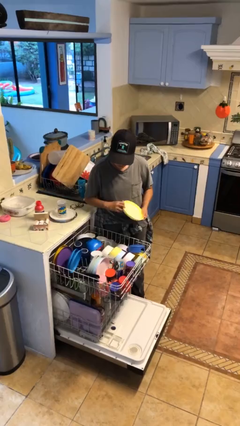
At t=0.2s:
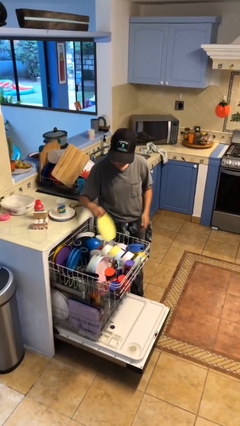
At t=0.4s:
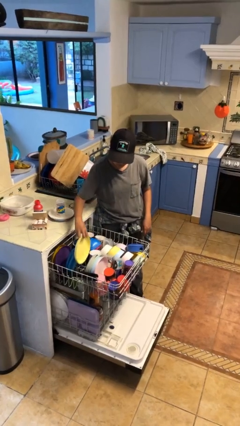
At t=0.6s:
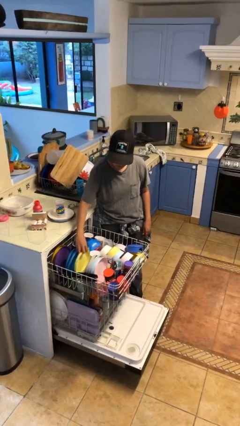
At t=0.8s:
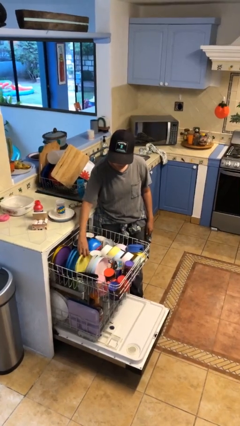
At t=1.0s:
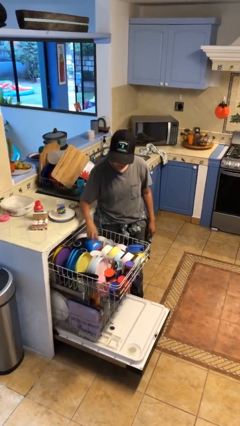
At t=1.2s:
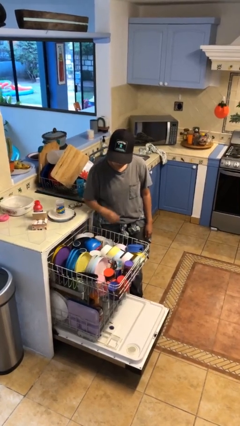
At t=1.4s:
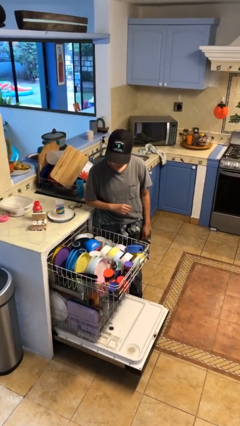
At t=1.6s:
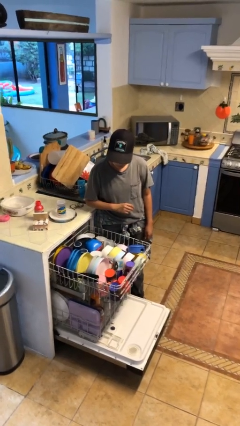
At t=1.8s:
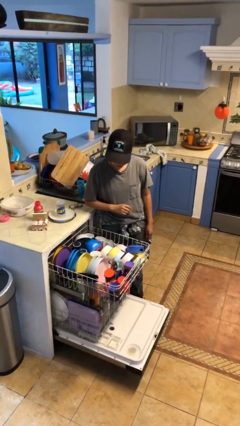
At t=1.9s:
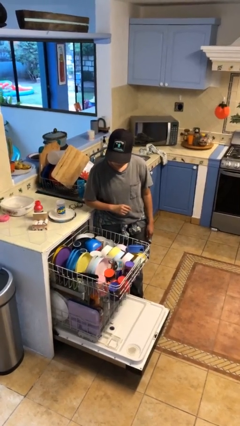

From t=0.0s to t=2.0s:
person loads dishwasher

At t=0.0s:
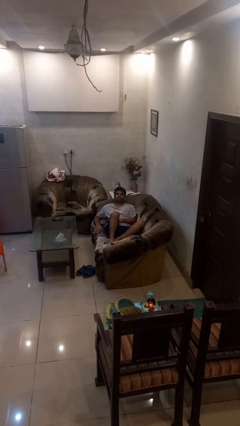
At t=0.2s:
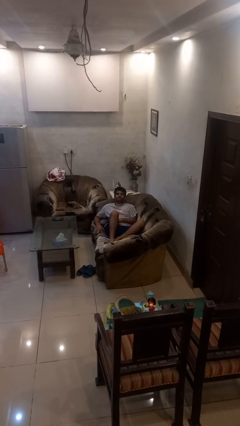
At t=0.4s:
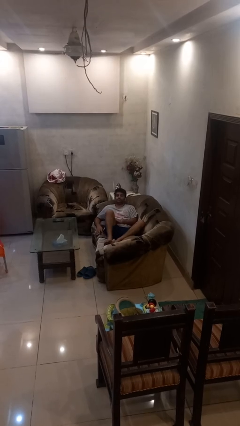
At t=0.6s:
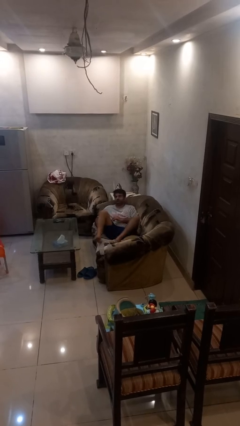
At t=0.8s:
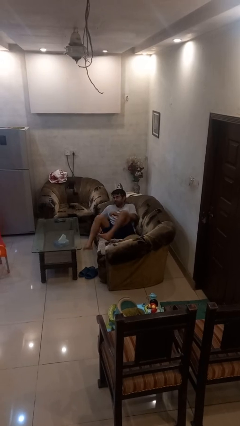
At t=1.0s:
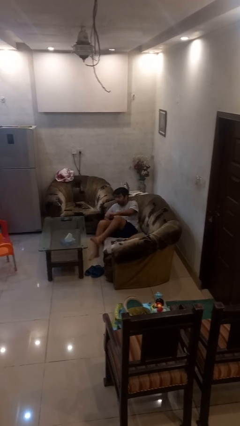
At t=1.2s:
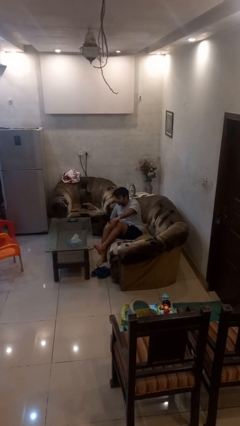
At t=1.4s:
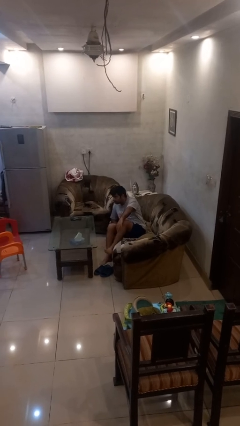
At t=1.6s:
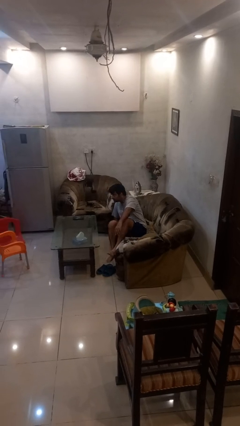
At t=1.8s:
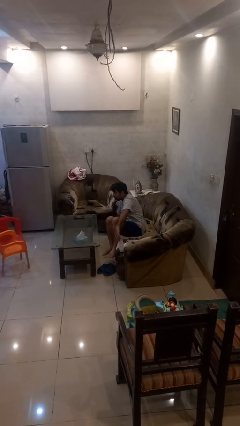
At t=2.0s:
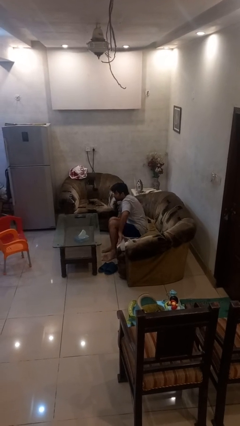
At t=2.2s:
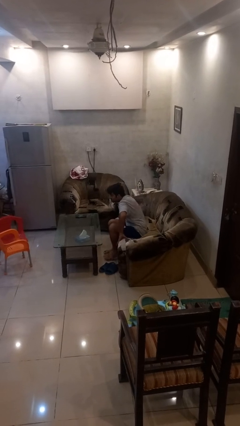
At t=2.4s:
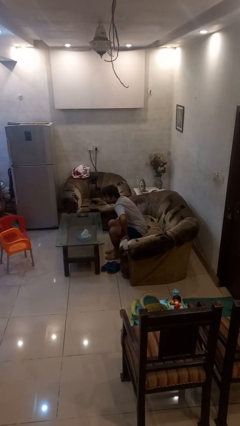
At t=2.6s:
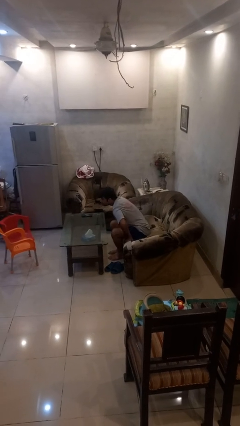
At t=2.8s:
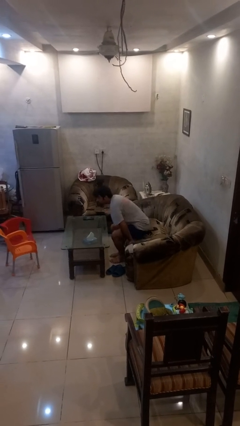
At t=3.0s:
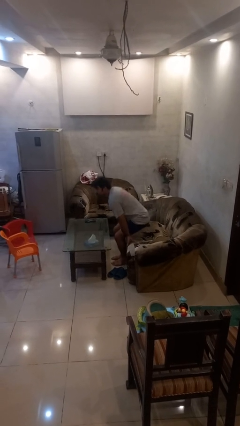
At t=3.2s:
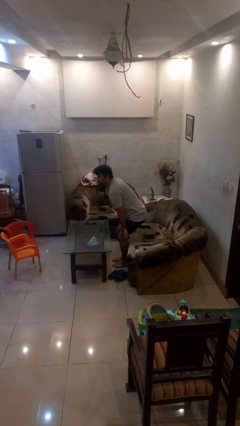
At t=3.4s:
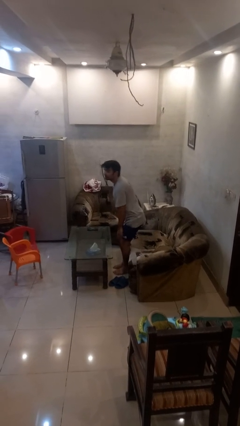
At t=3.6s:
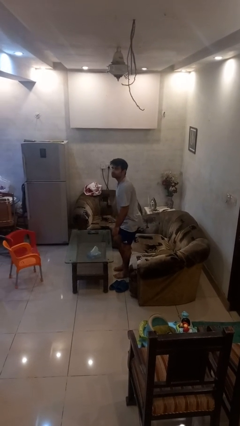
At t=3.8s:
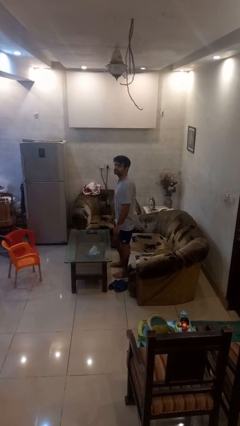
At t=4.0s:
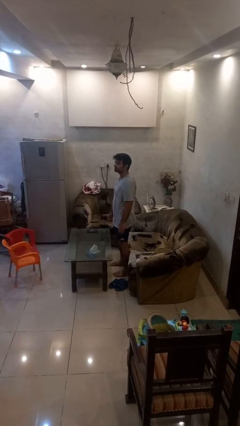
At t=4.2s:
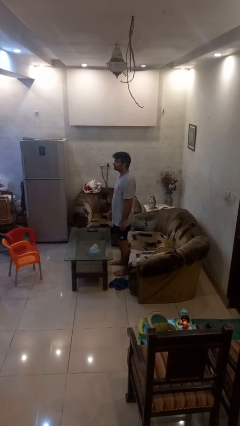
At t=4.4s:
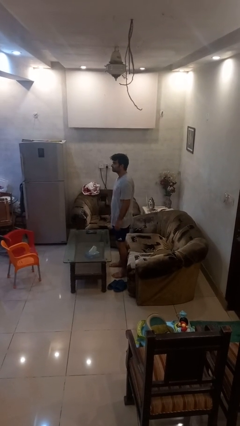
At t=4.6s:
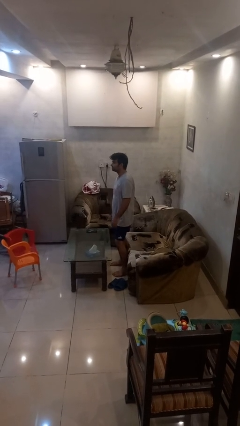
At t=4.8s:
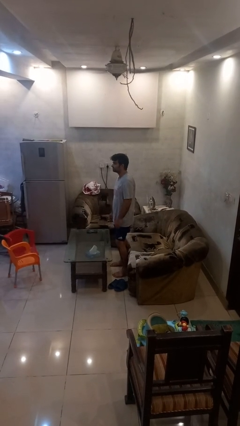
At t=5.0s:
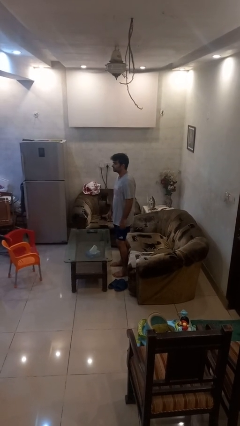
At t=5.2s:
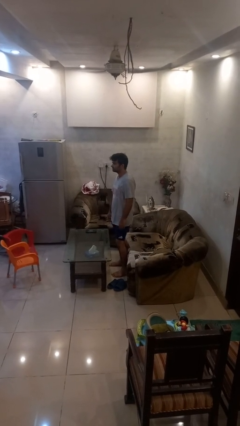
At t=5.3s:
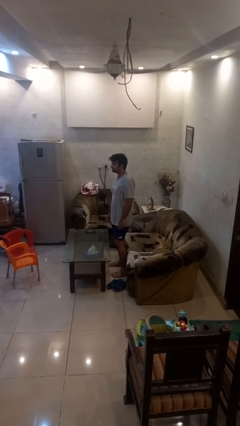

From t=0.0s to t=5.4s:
person stands up

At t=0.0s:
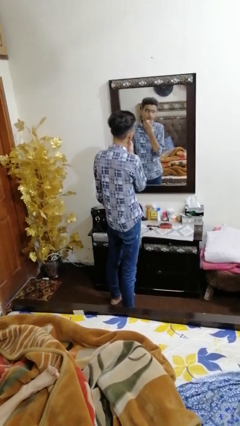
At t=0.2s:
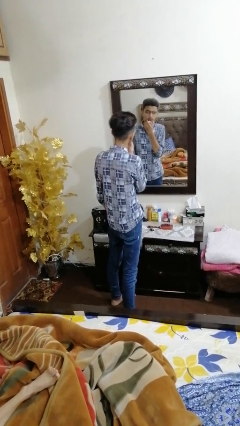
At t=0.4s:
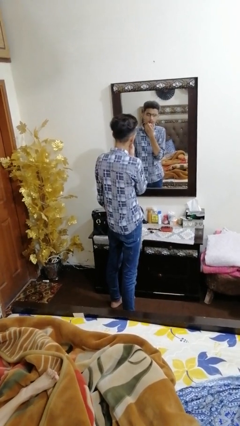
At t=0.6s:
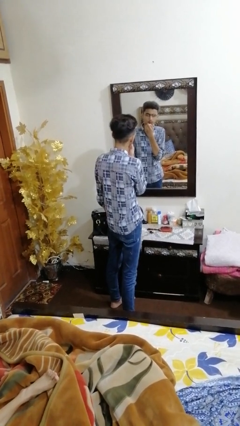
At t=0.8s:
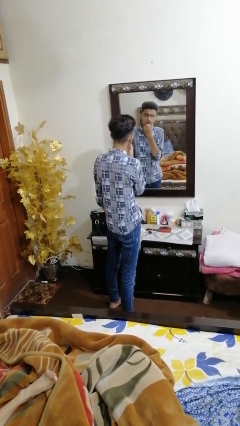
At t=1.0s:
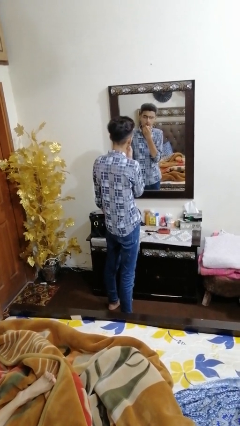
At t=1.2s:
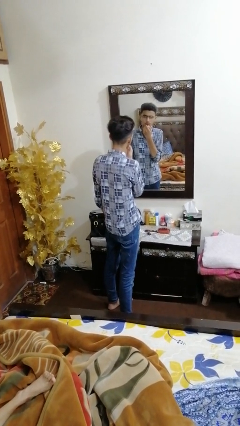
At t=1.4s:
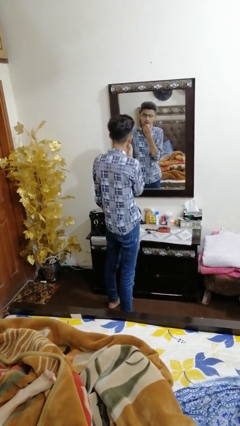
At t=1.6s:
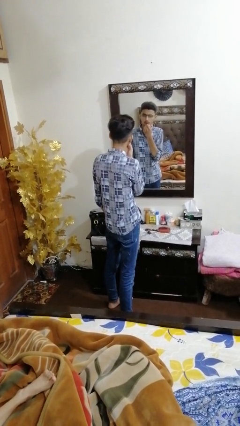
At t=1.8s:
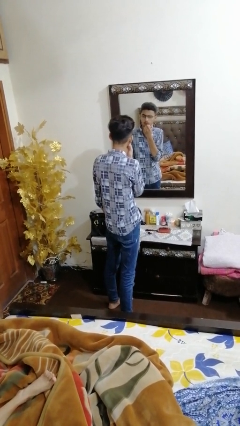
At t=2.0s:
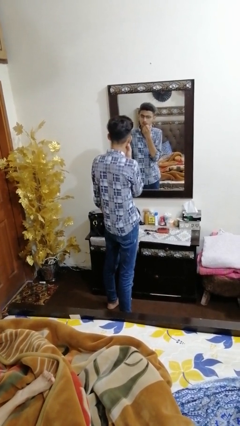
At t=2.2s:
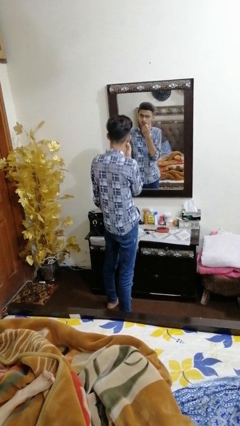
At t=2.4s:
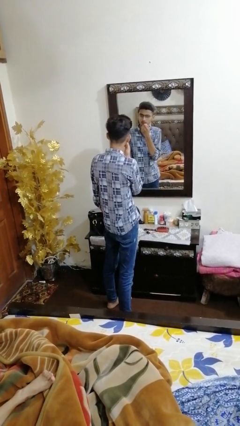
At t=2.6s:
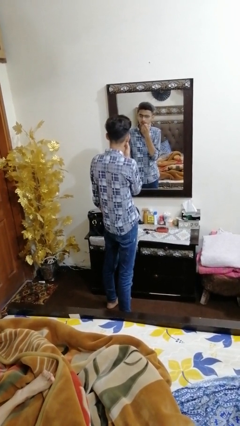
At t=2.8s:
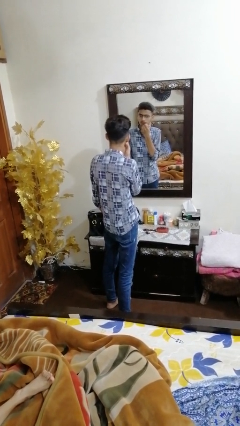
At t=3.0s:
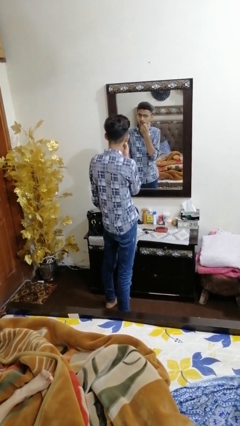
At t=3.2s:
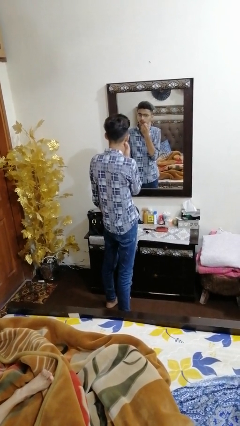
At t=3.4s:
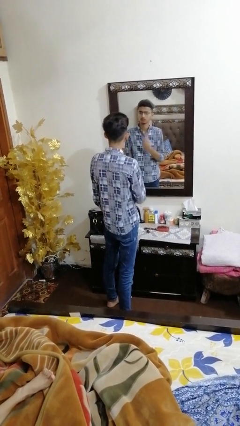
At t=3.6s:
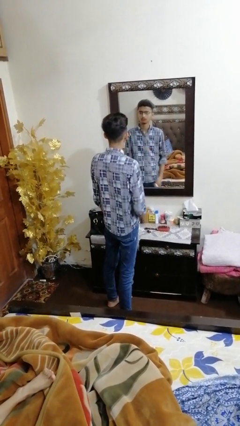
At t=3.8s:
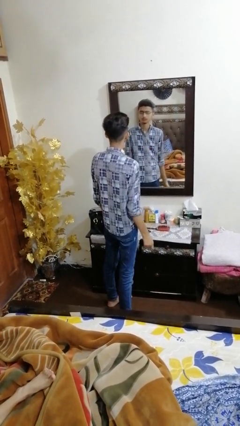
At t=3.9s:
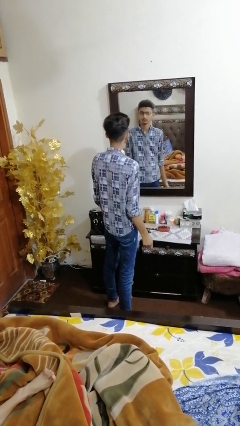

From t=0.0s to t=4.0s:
person applies lip makeup

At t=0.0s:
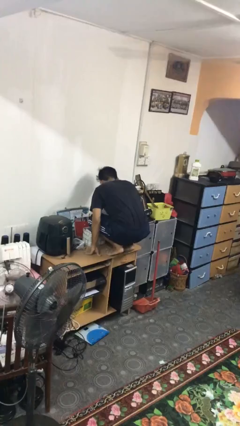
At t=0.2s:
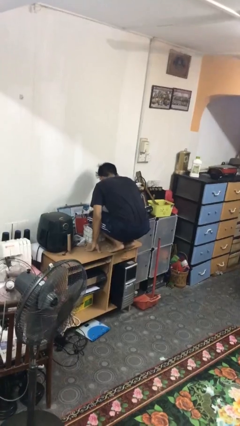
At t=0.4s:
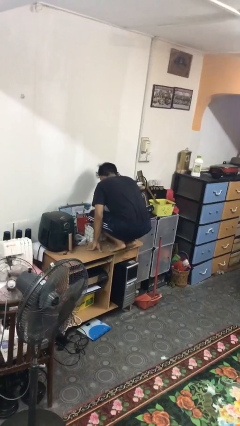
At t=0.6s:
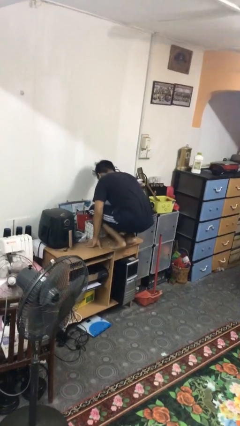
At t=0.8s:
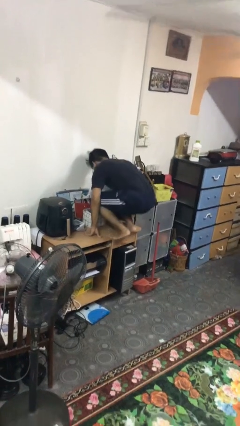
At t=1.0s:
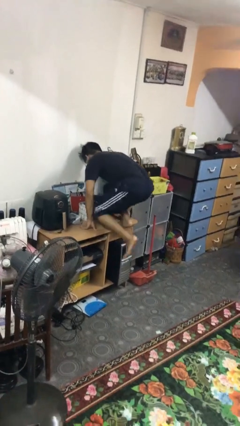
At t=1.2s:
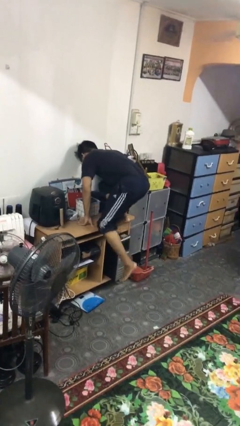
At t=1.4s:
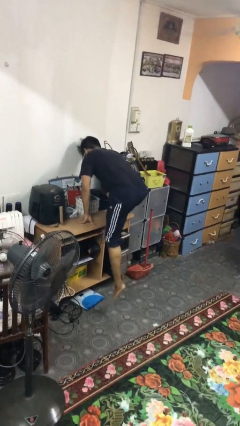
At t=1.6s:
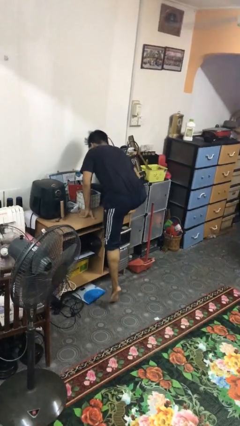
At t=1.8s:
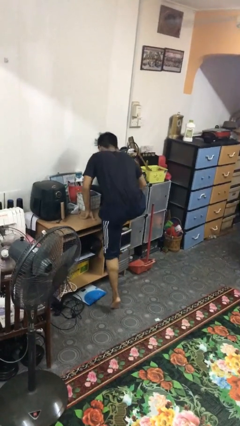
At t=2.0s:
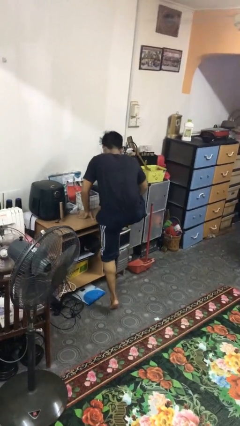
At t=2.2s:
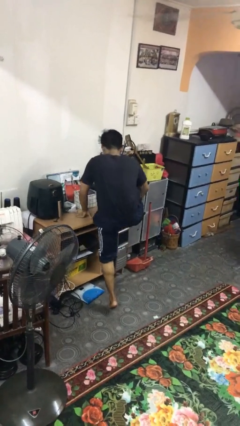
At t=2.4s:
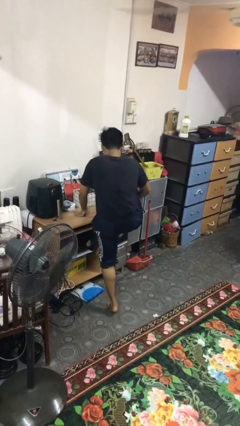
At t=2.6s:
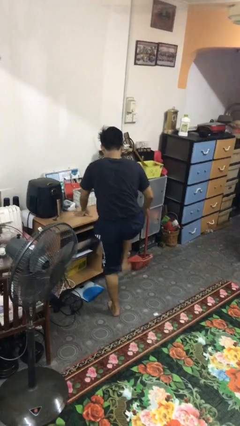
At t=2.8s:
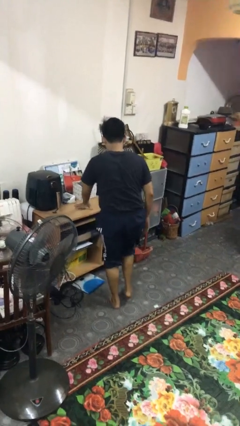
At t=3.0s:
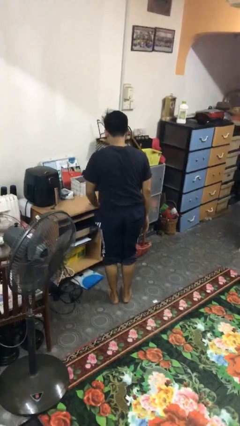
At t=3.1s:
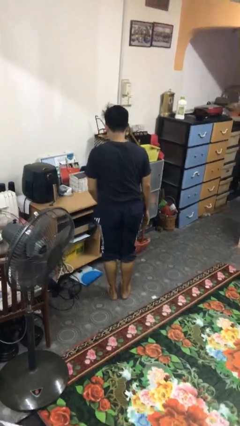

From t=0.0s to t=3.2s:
person climbs off table

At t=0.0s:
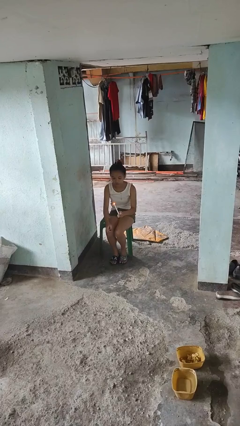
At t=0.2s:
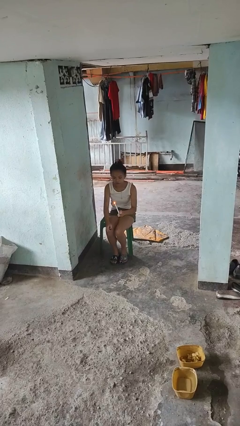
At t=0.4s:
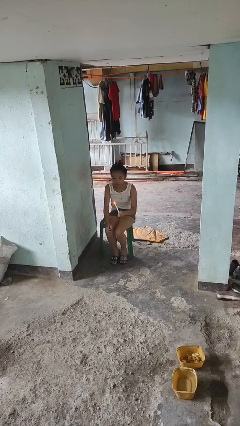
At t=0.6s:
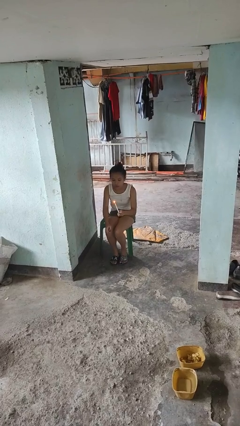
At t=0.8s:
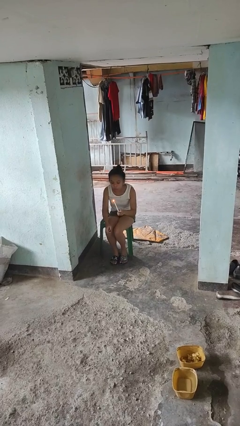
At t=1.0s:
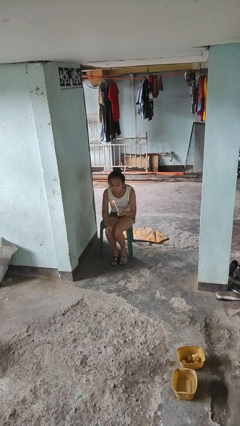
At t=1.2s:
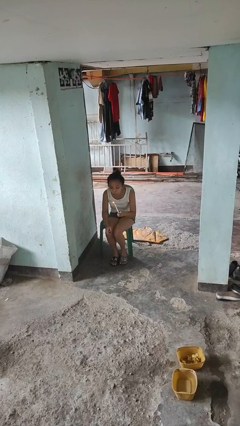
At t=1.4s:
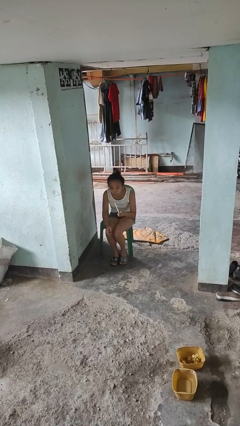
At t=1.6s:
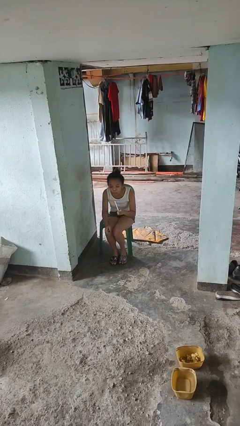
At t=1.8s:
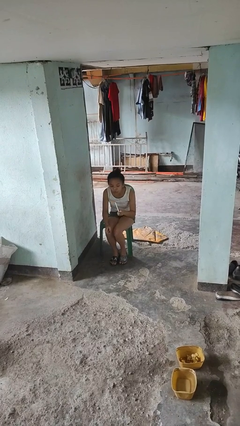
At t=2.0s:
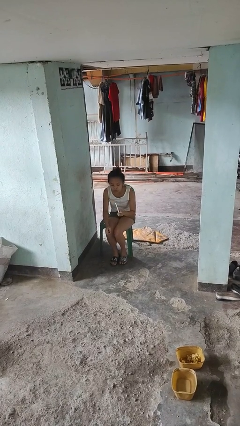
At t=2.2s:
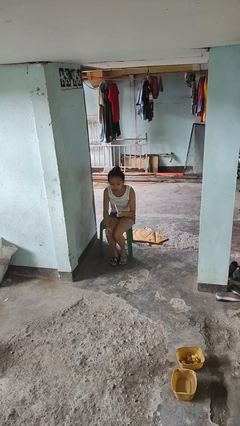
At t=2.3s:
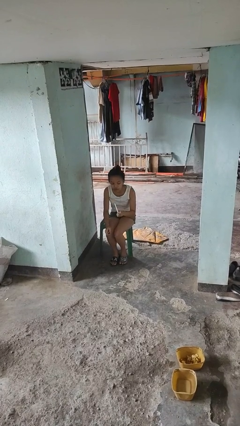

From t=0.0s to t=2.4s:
person extinguishes candle

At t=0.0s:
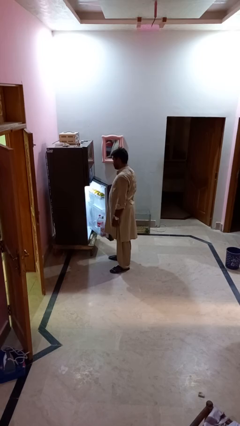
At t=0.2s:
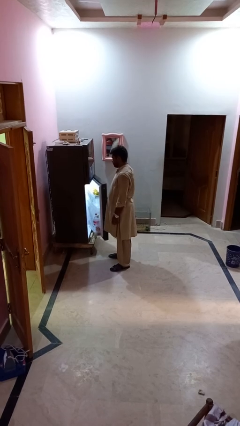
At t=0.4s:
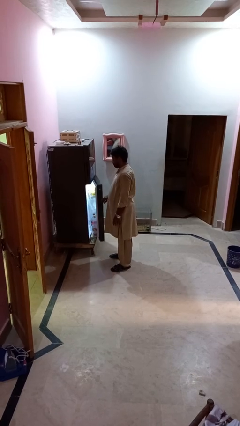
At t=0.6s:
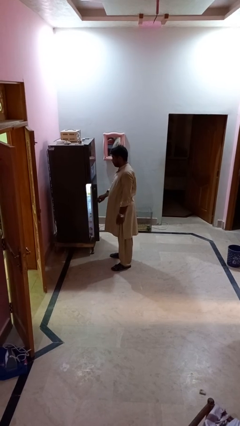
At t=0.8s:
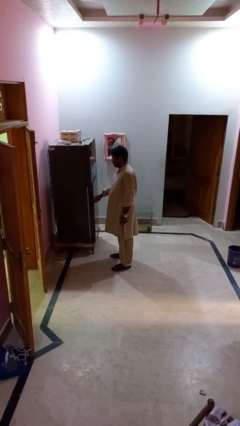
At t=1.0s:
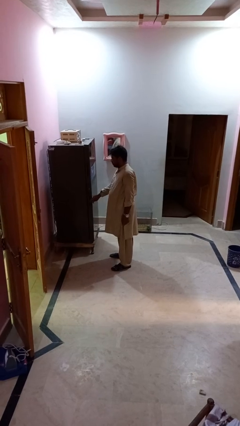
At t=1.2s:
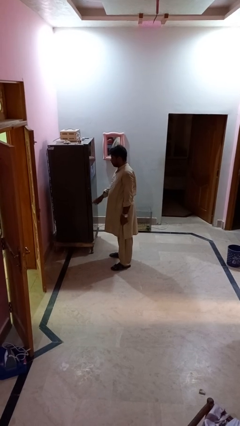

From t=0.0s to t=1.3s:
person closes refrigerator
